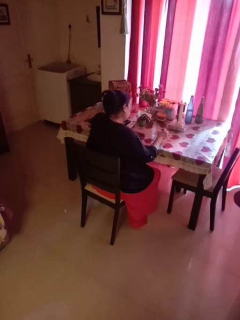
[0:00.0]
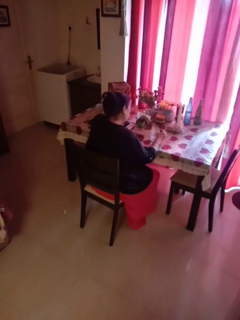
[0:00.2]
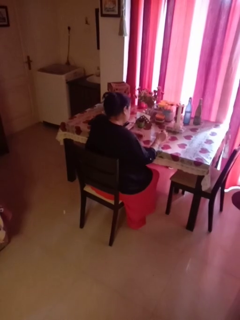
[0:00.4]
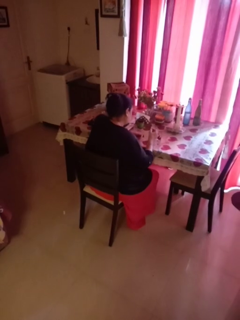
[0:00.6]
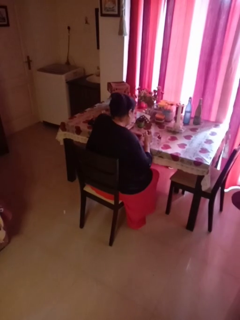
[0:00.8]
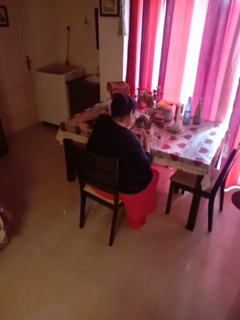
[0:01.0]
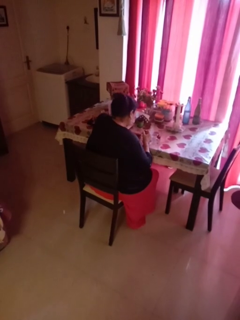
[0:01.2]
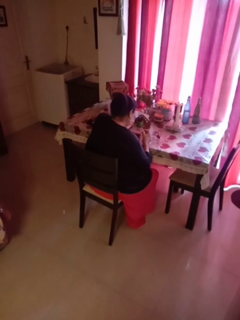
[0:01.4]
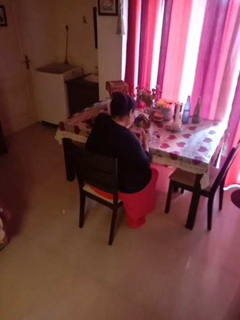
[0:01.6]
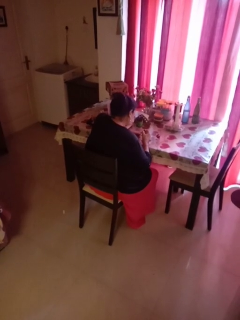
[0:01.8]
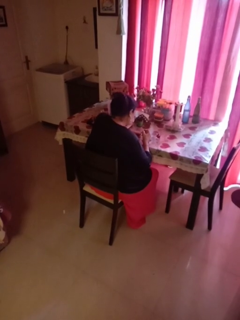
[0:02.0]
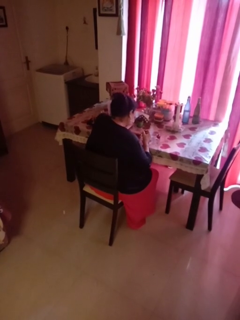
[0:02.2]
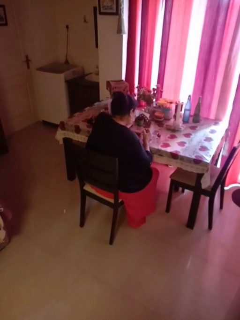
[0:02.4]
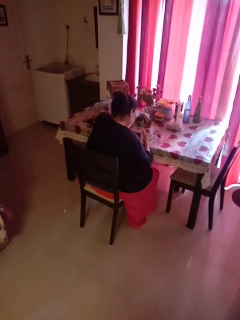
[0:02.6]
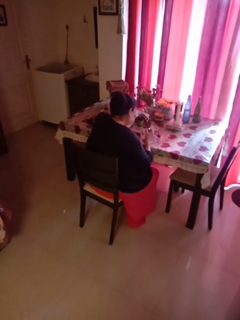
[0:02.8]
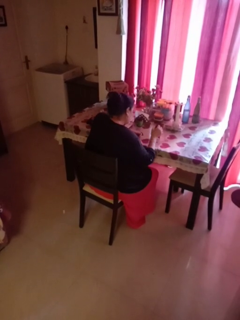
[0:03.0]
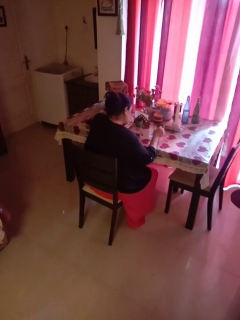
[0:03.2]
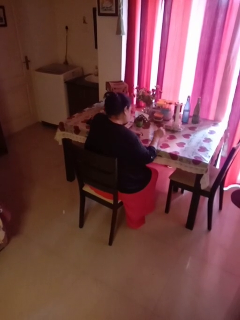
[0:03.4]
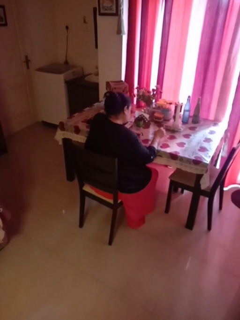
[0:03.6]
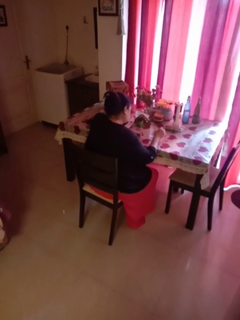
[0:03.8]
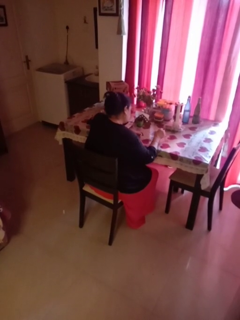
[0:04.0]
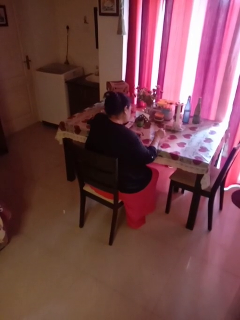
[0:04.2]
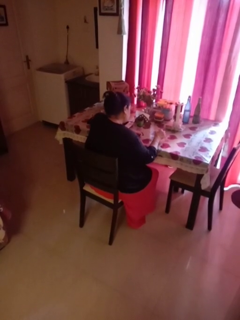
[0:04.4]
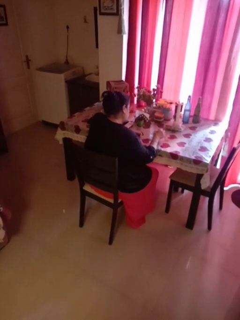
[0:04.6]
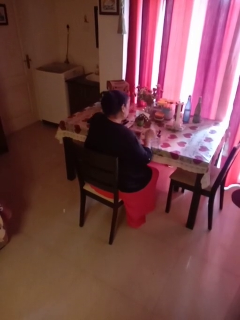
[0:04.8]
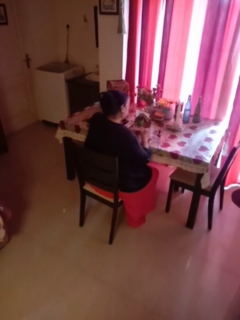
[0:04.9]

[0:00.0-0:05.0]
person paints fingernails

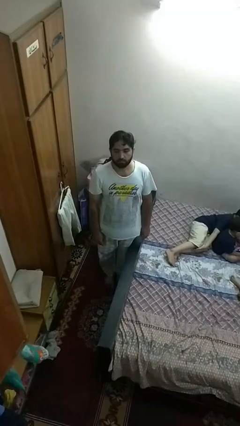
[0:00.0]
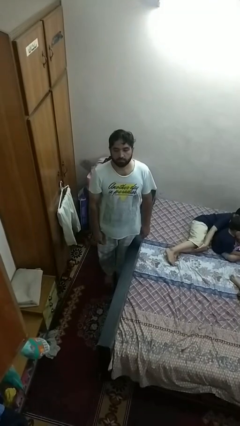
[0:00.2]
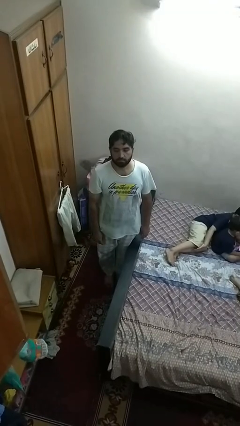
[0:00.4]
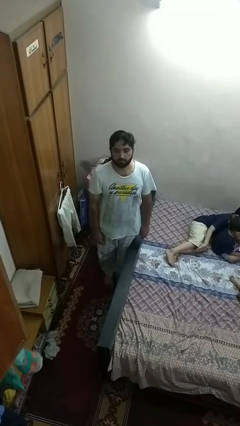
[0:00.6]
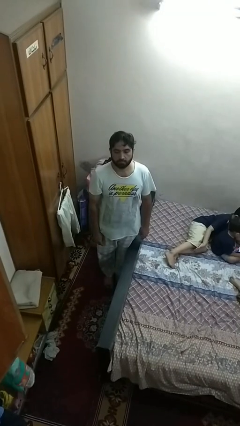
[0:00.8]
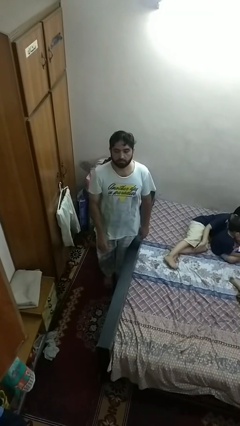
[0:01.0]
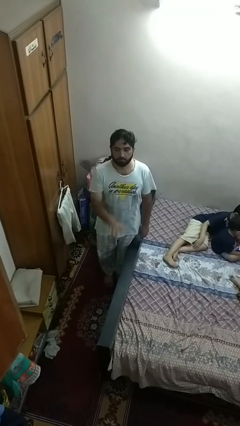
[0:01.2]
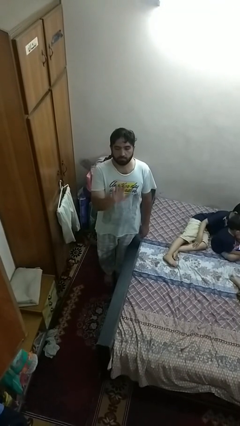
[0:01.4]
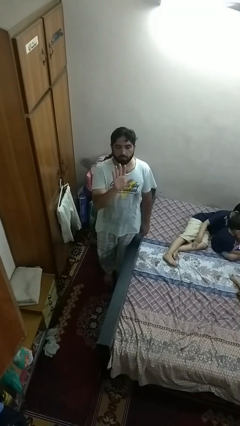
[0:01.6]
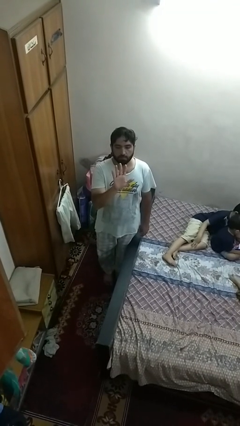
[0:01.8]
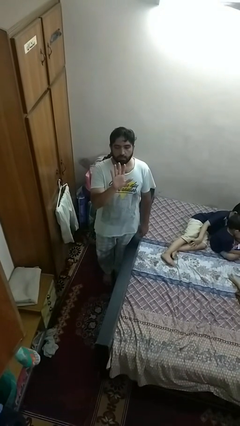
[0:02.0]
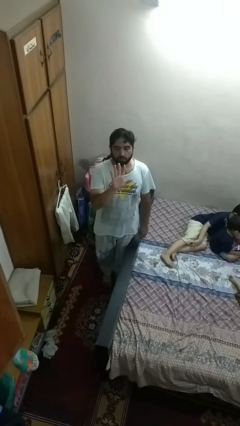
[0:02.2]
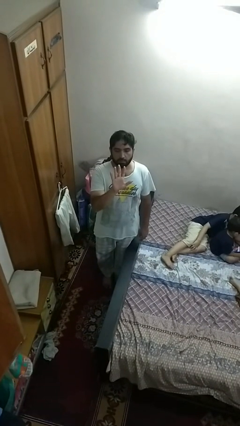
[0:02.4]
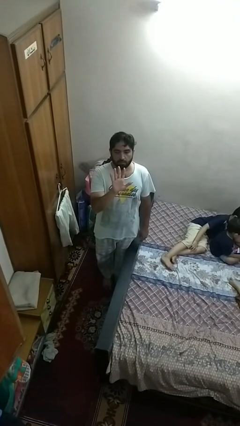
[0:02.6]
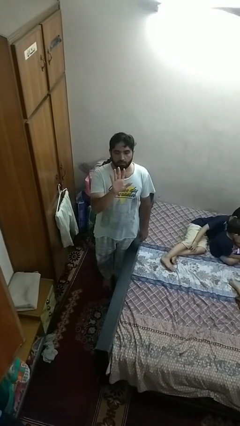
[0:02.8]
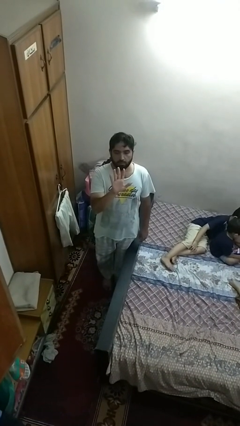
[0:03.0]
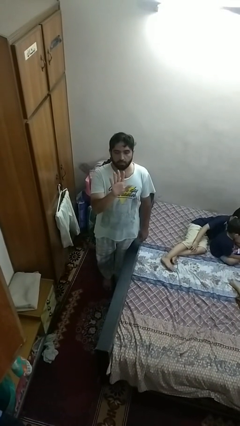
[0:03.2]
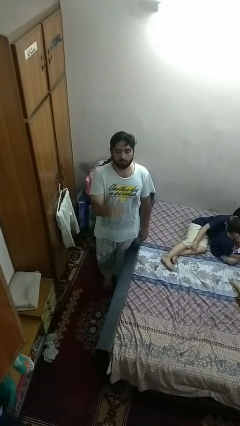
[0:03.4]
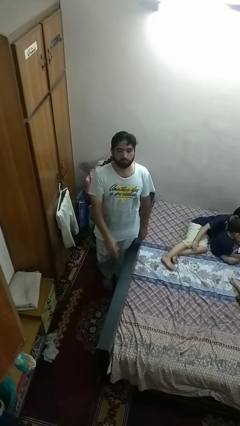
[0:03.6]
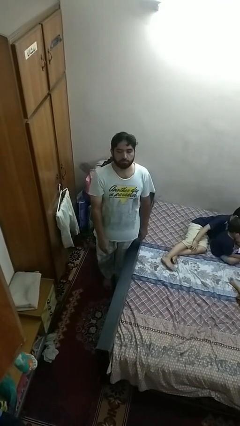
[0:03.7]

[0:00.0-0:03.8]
person gestures number five

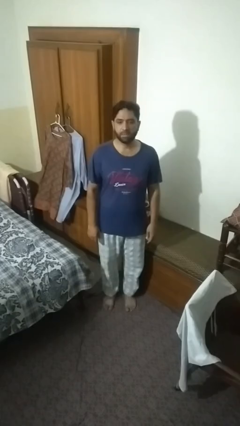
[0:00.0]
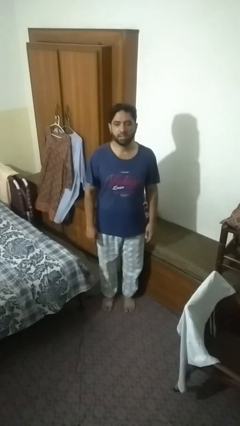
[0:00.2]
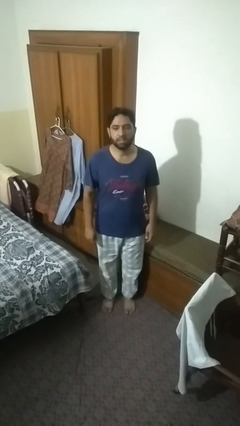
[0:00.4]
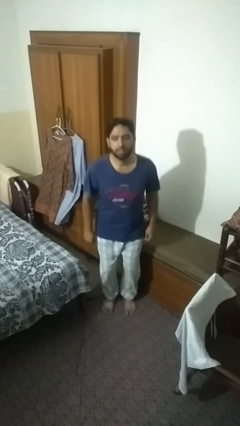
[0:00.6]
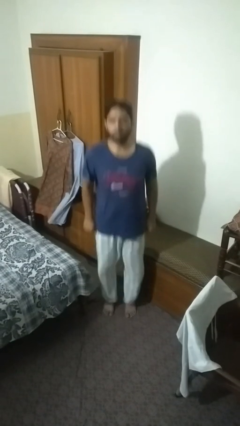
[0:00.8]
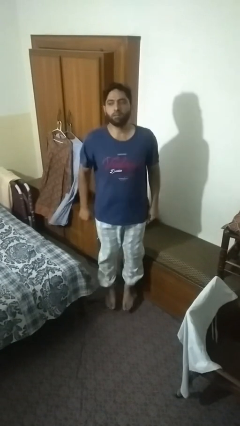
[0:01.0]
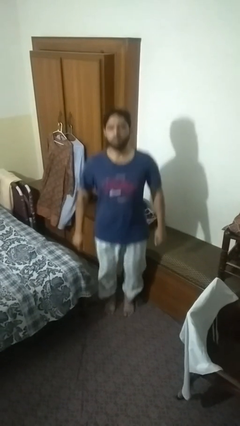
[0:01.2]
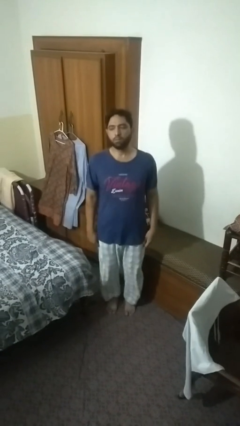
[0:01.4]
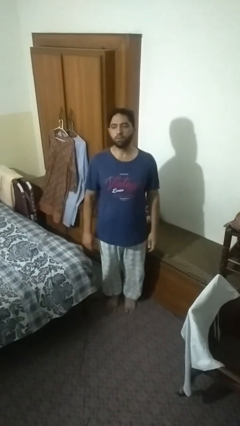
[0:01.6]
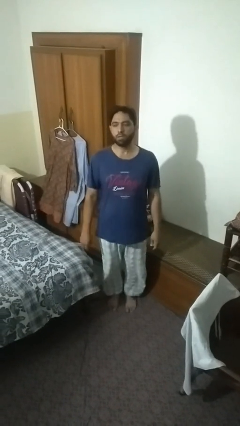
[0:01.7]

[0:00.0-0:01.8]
person jumps

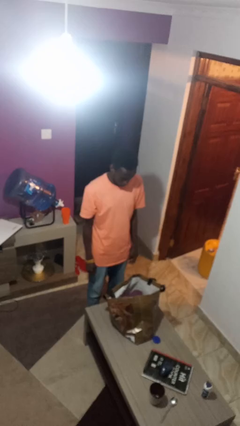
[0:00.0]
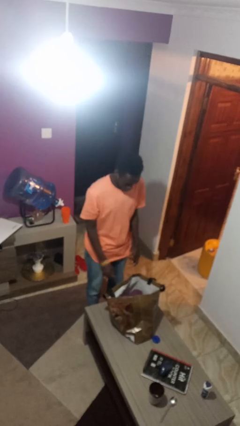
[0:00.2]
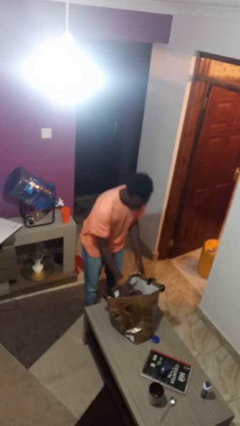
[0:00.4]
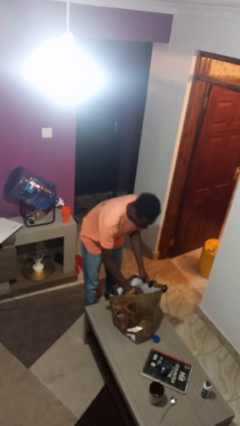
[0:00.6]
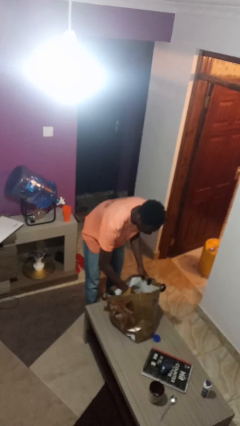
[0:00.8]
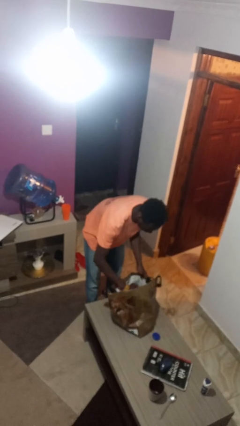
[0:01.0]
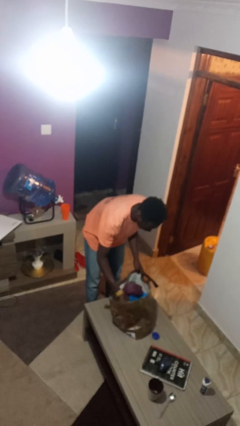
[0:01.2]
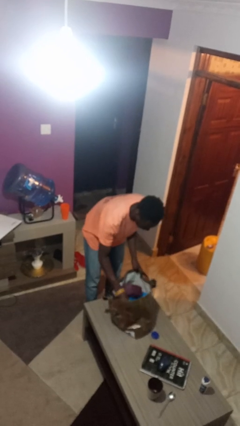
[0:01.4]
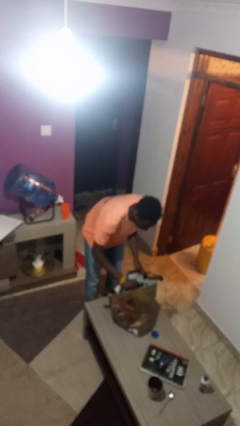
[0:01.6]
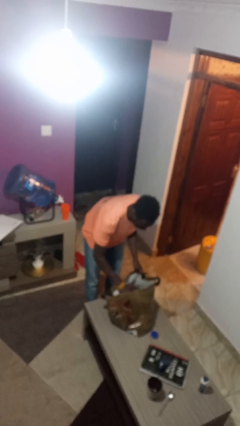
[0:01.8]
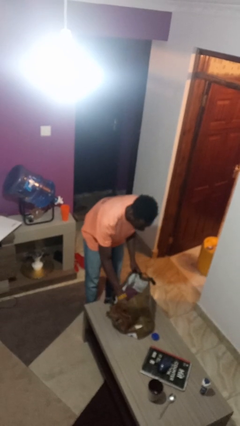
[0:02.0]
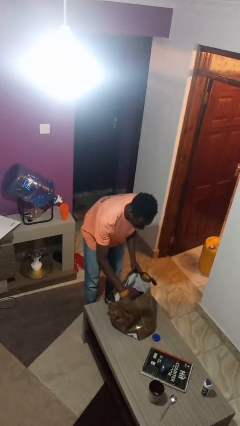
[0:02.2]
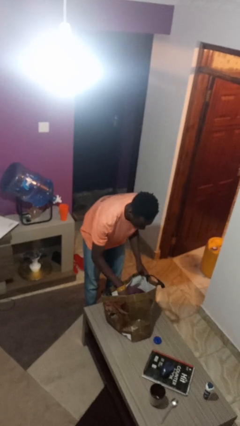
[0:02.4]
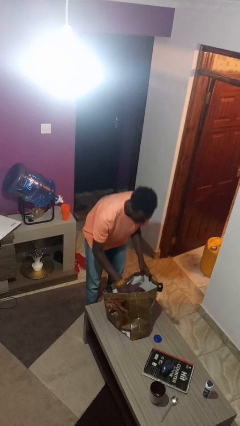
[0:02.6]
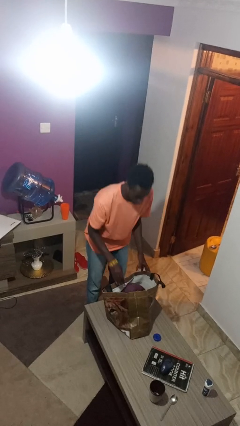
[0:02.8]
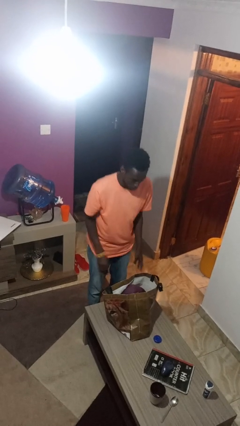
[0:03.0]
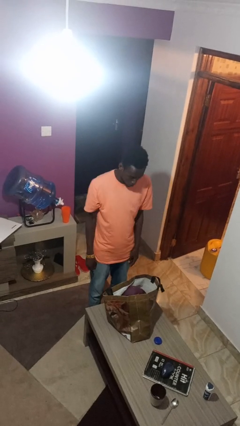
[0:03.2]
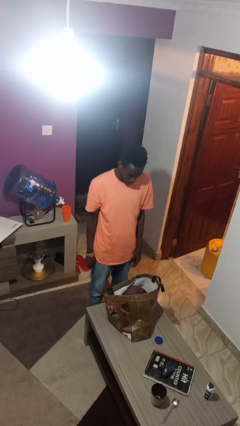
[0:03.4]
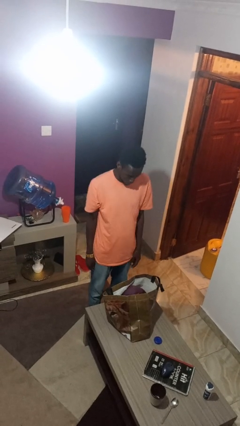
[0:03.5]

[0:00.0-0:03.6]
person searches in bag

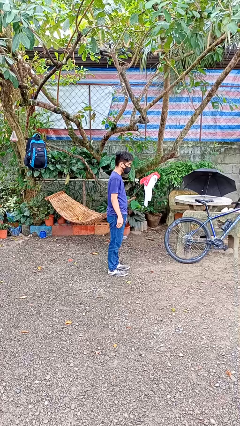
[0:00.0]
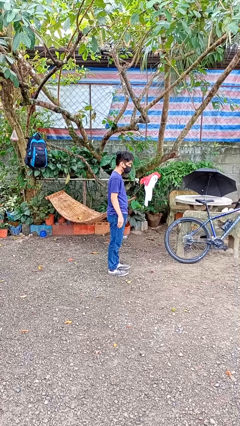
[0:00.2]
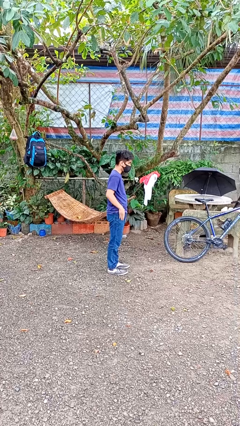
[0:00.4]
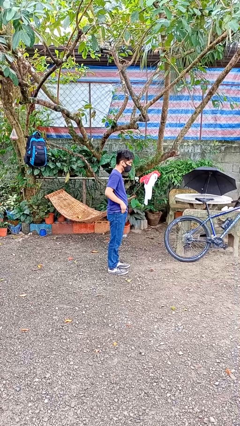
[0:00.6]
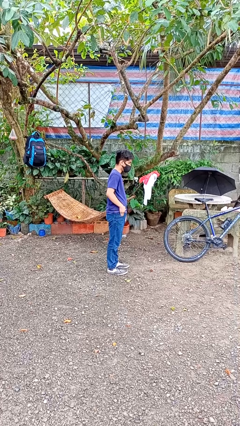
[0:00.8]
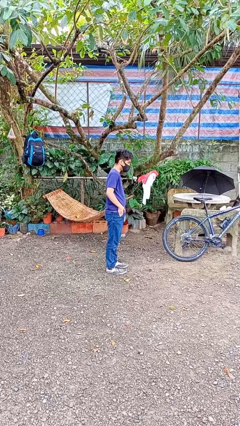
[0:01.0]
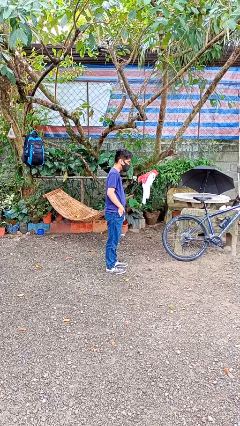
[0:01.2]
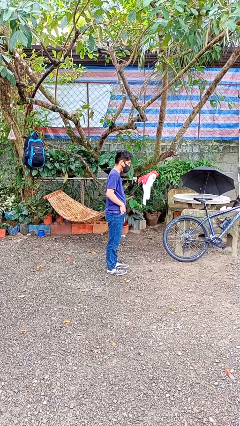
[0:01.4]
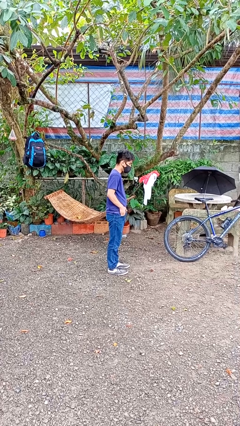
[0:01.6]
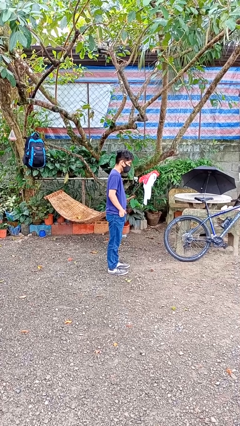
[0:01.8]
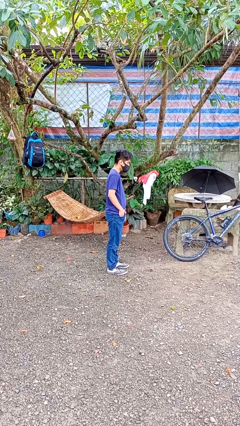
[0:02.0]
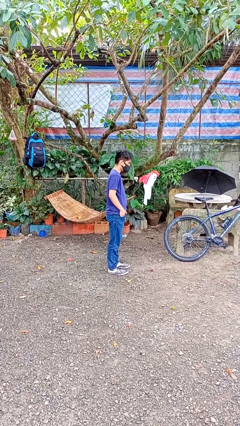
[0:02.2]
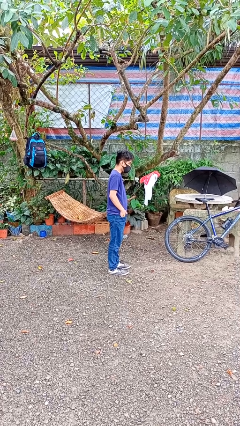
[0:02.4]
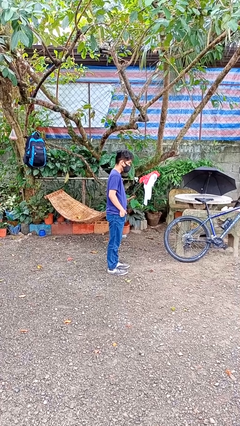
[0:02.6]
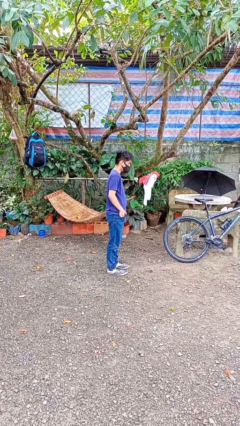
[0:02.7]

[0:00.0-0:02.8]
person puts hands in back pockets

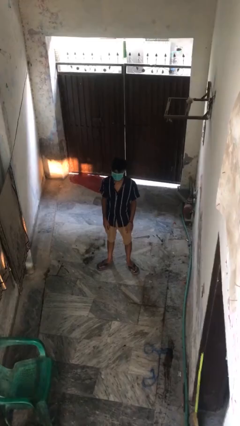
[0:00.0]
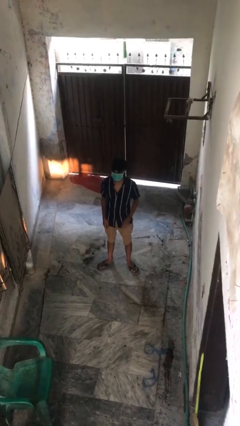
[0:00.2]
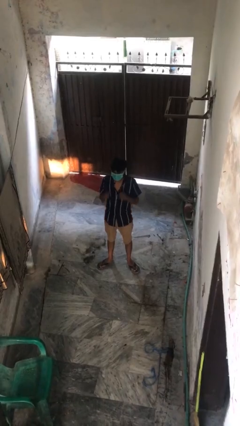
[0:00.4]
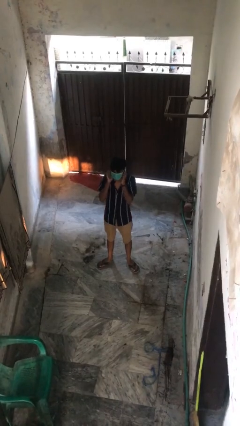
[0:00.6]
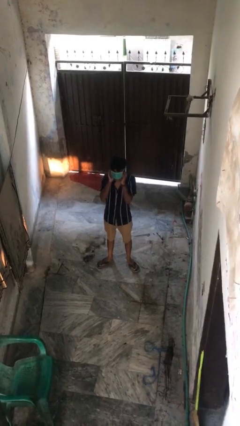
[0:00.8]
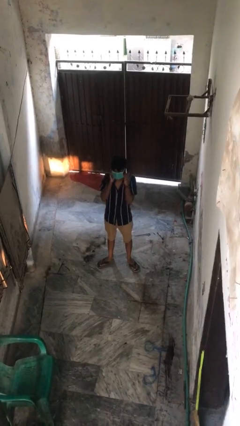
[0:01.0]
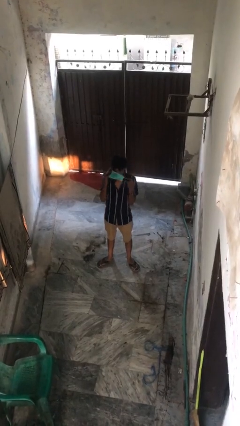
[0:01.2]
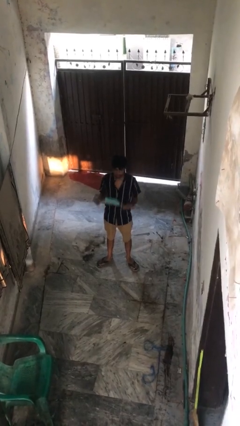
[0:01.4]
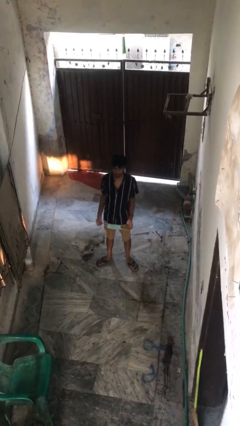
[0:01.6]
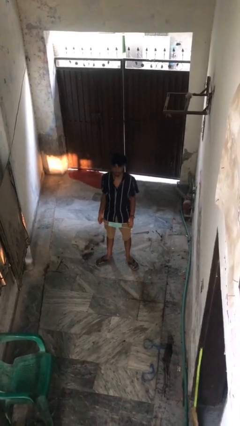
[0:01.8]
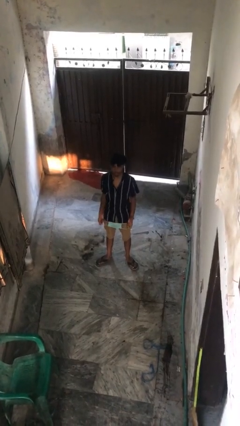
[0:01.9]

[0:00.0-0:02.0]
person takes off facemask
